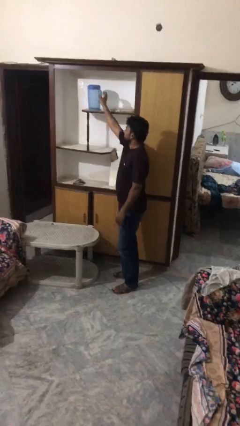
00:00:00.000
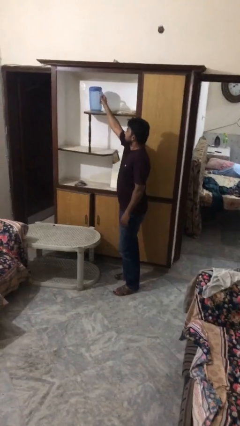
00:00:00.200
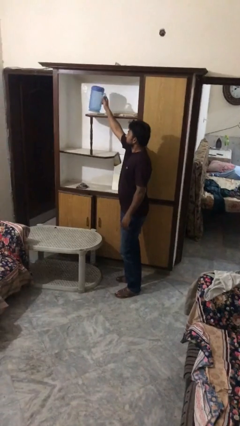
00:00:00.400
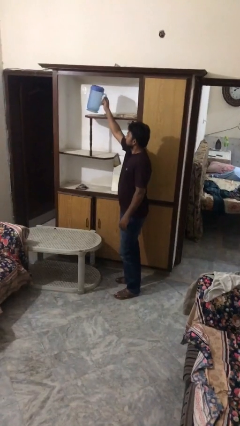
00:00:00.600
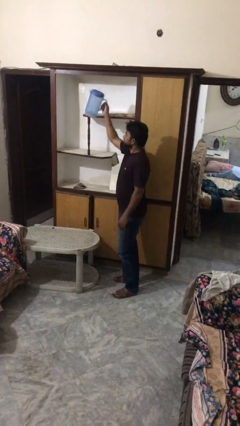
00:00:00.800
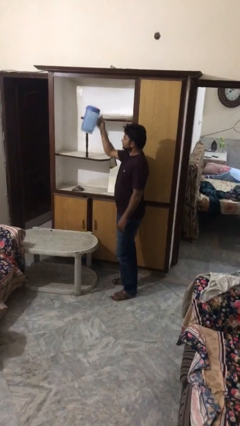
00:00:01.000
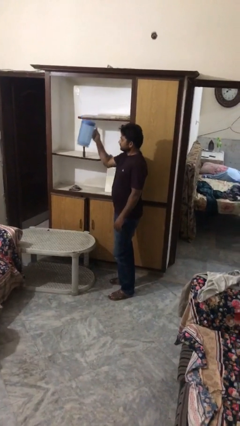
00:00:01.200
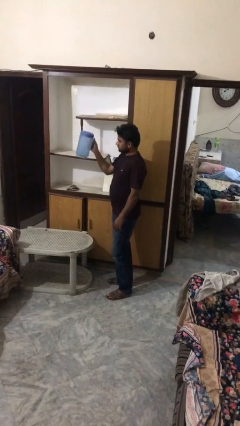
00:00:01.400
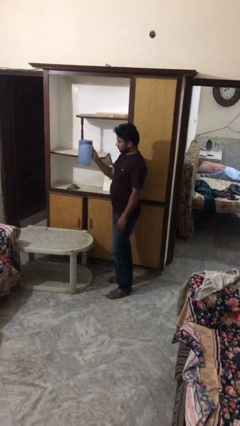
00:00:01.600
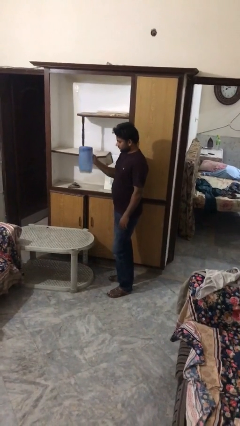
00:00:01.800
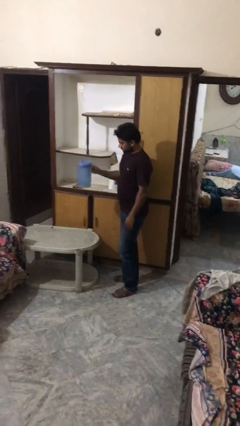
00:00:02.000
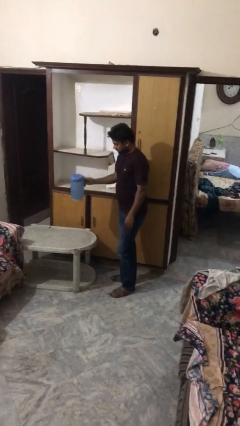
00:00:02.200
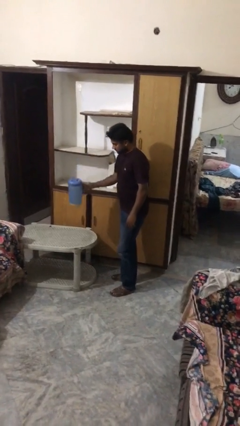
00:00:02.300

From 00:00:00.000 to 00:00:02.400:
person picks up object from shelf

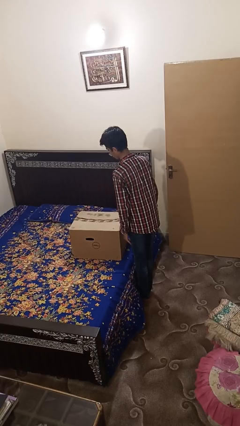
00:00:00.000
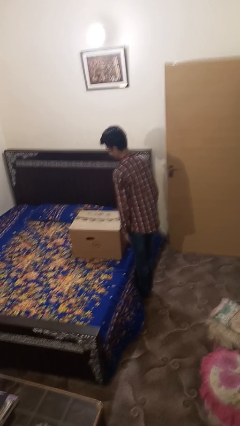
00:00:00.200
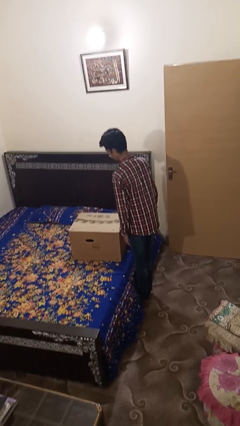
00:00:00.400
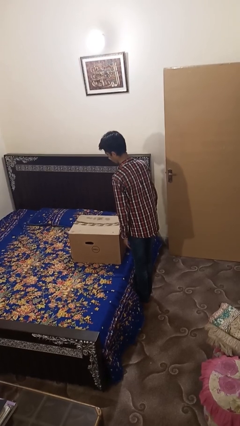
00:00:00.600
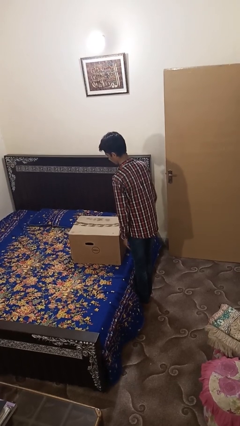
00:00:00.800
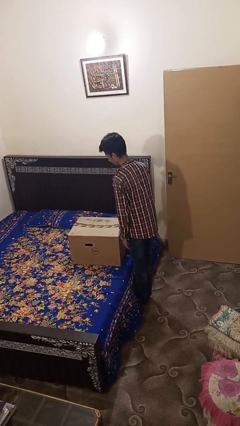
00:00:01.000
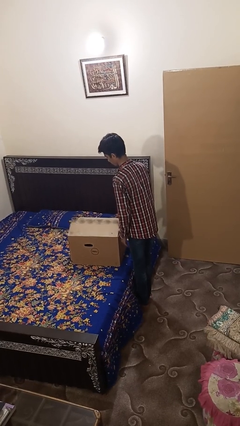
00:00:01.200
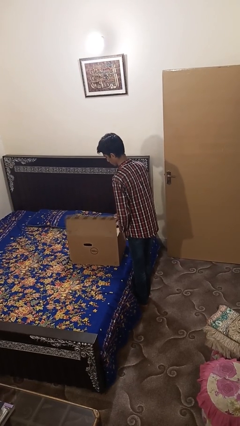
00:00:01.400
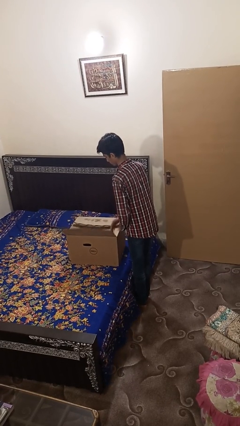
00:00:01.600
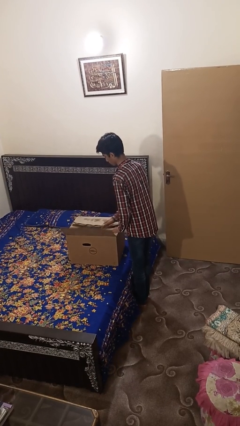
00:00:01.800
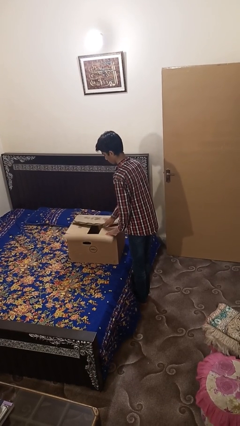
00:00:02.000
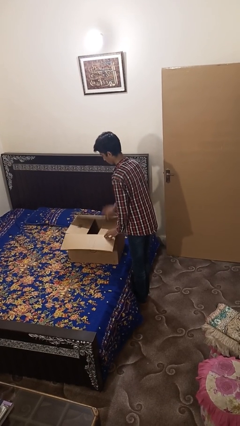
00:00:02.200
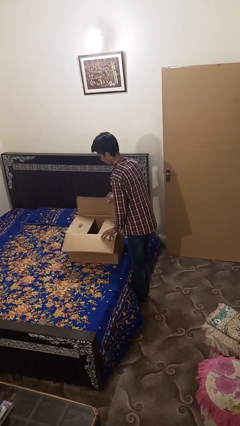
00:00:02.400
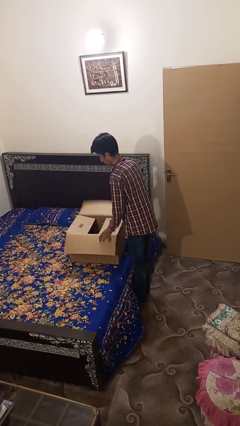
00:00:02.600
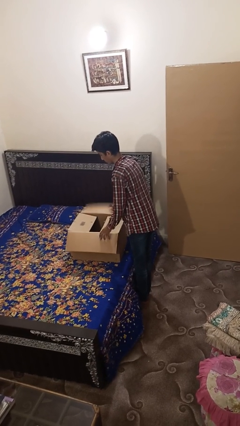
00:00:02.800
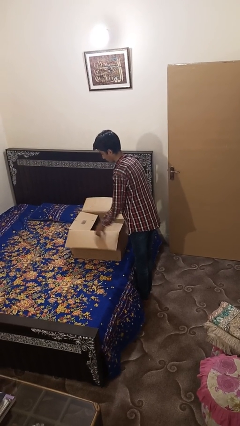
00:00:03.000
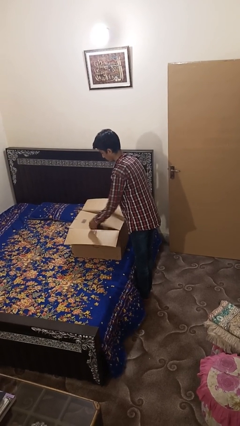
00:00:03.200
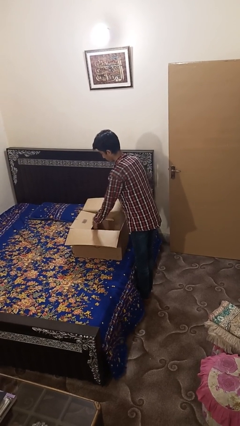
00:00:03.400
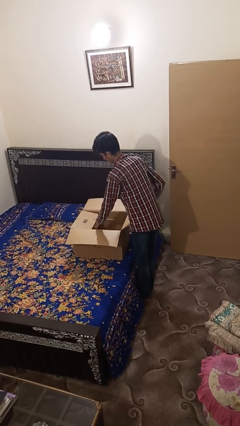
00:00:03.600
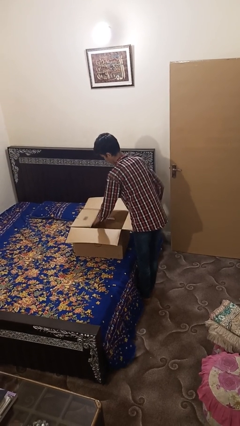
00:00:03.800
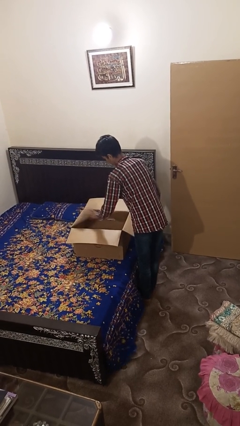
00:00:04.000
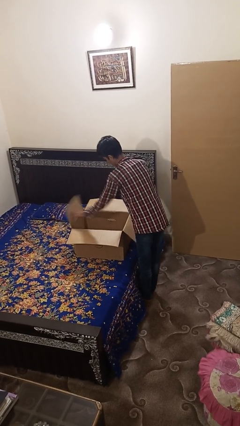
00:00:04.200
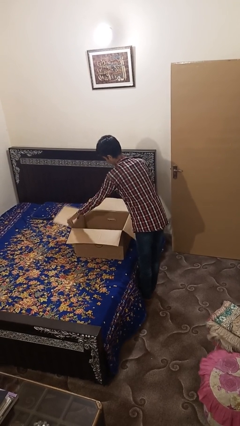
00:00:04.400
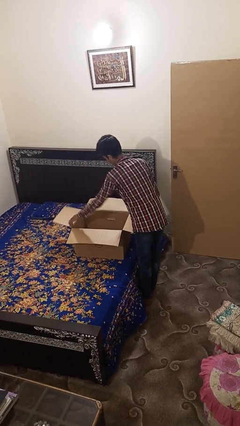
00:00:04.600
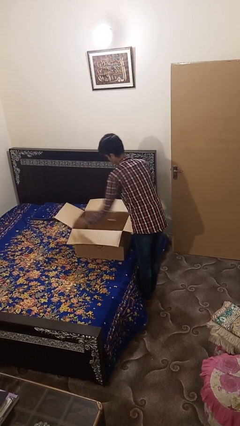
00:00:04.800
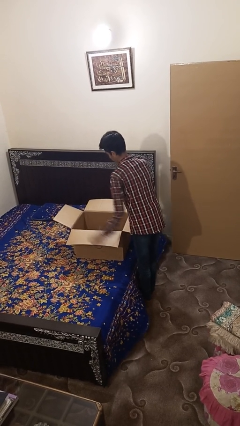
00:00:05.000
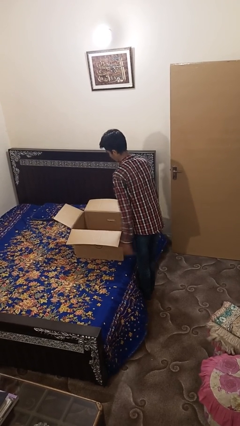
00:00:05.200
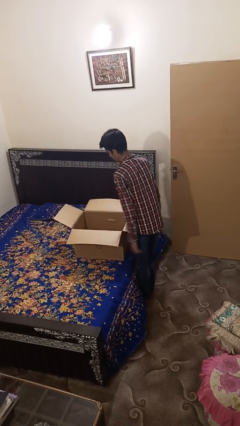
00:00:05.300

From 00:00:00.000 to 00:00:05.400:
person opens box

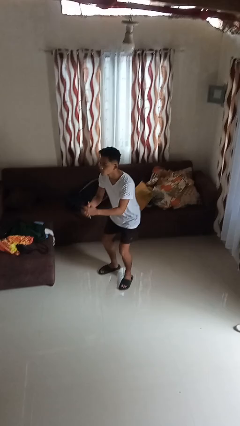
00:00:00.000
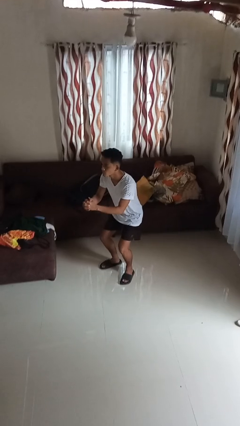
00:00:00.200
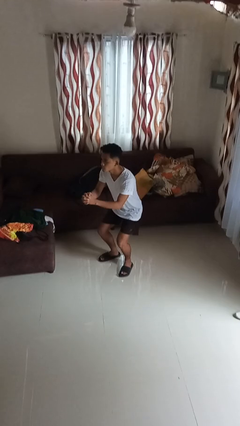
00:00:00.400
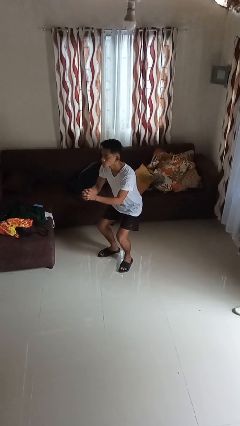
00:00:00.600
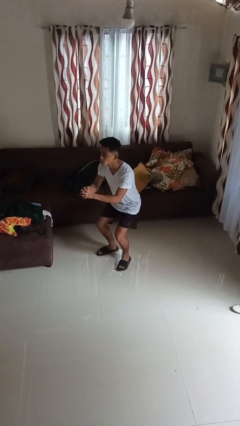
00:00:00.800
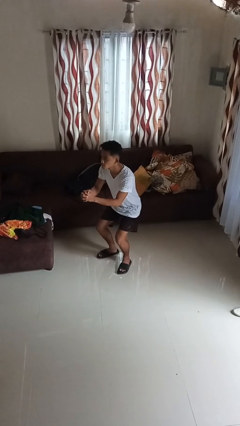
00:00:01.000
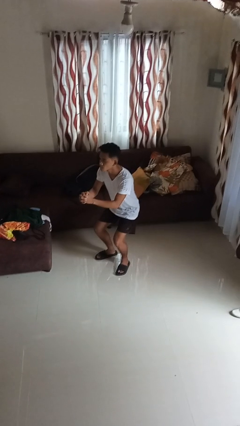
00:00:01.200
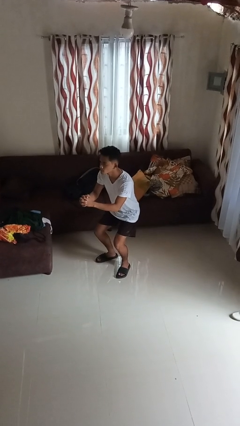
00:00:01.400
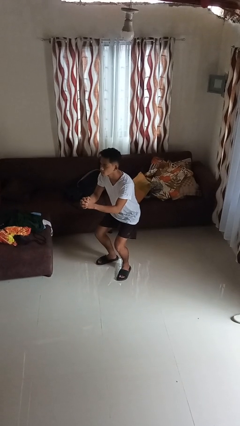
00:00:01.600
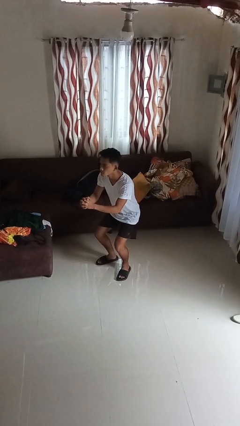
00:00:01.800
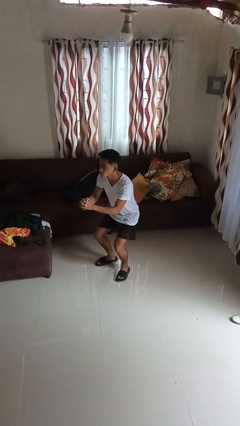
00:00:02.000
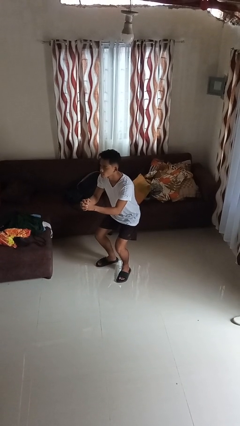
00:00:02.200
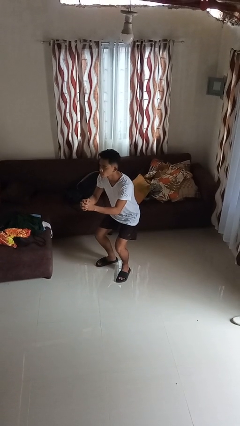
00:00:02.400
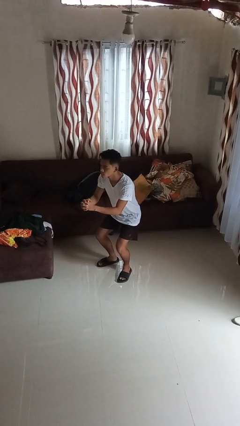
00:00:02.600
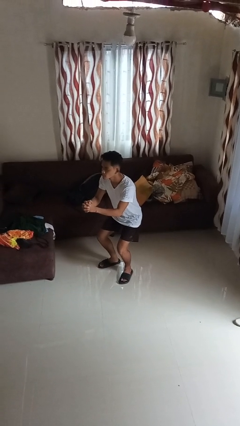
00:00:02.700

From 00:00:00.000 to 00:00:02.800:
person squats

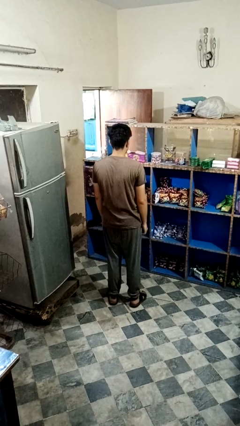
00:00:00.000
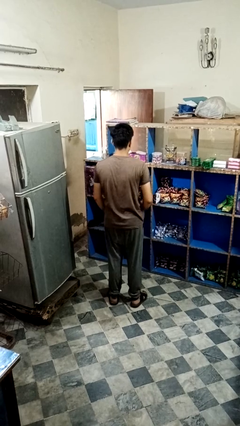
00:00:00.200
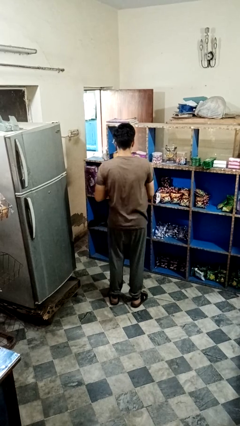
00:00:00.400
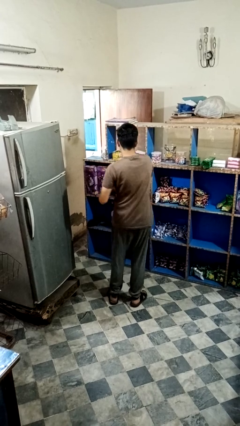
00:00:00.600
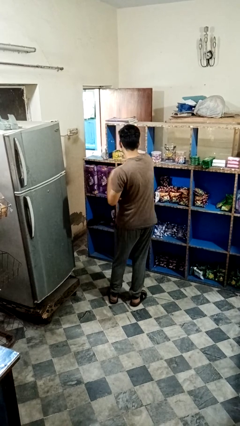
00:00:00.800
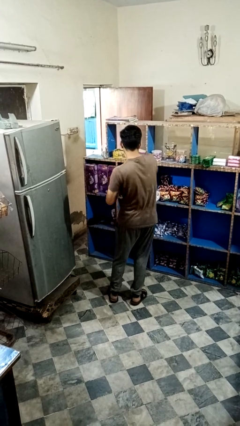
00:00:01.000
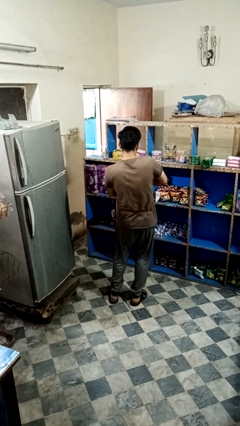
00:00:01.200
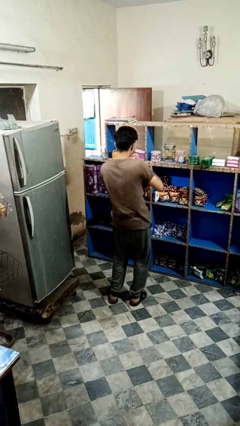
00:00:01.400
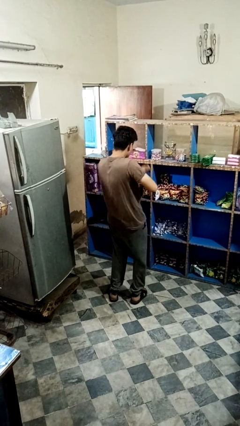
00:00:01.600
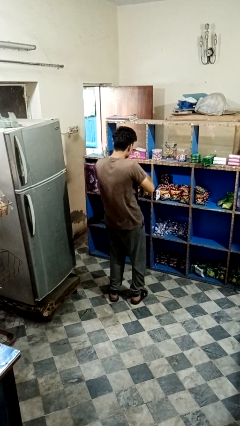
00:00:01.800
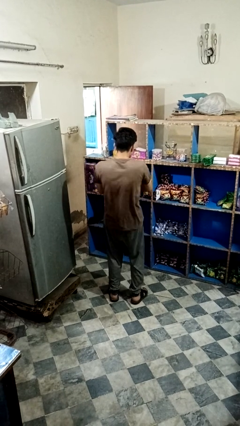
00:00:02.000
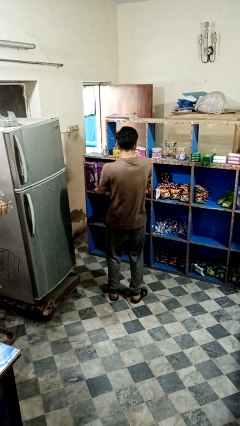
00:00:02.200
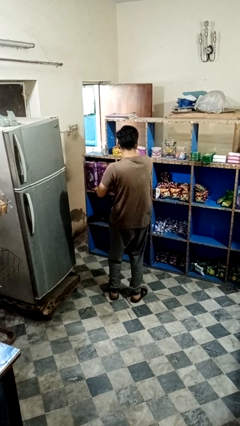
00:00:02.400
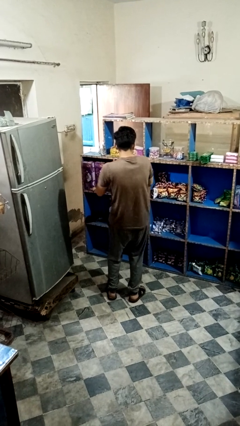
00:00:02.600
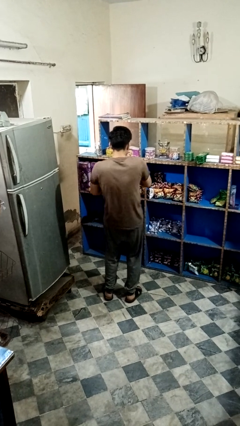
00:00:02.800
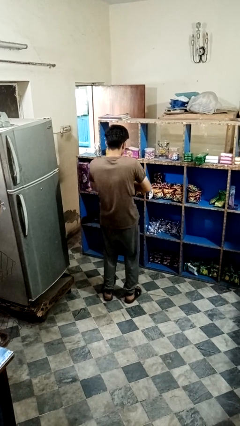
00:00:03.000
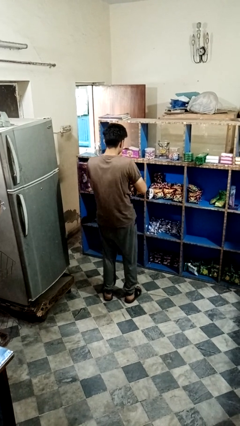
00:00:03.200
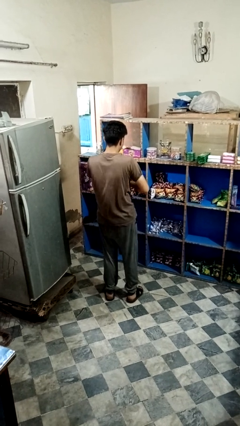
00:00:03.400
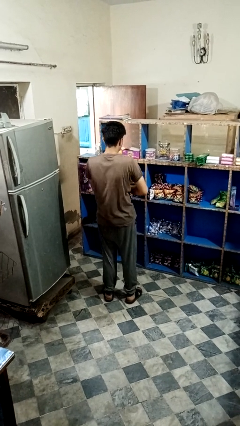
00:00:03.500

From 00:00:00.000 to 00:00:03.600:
person dances in place

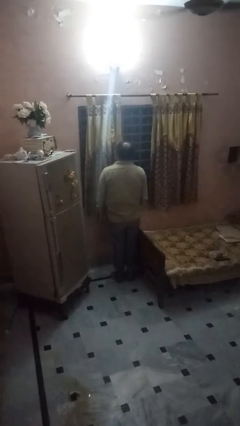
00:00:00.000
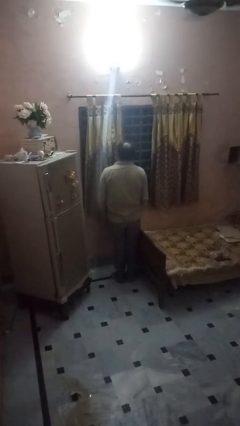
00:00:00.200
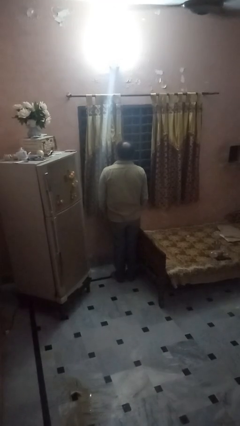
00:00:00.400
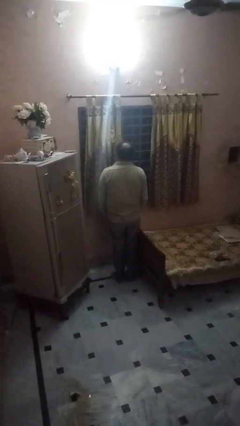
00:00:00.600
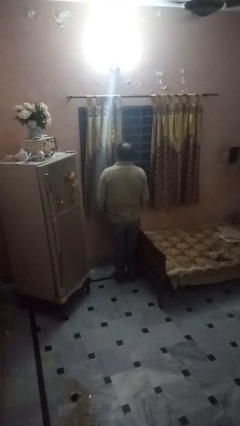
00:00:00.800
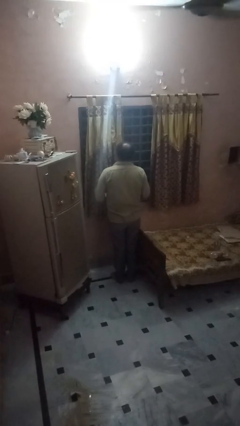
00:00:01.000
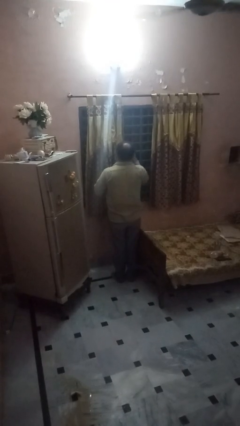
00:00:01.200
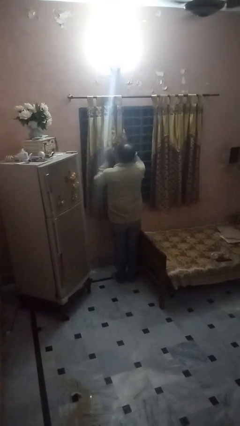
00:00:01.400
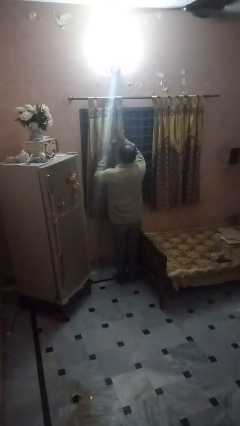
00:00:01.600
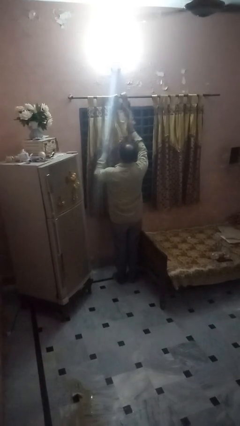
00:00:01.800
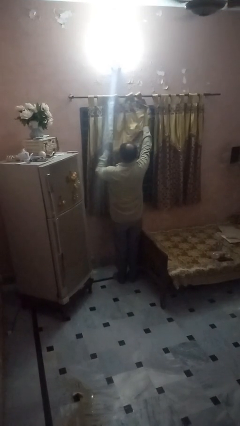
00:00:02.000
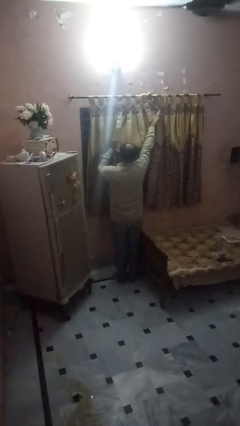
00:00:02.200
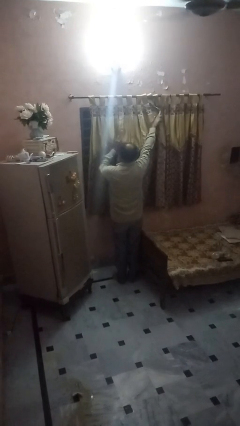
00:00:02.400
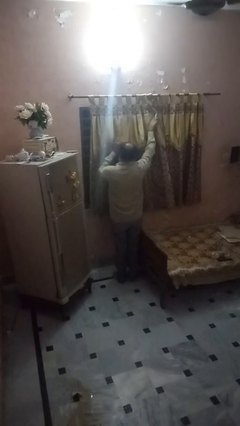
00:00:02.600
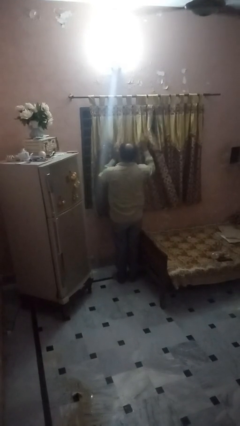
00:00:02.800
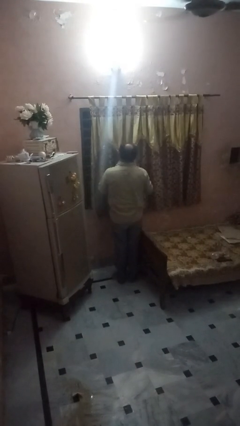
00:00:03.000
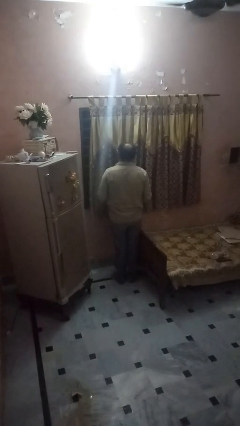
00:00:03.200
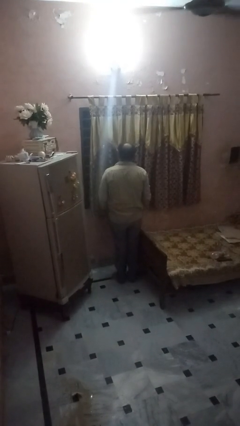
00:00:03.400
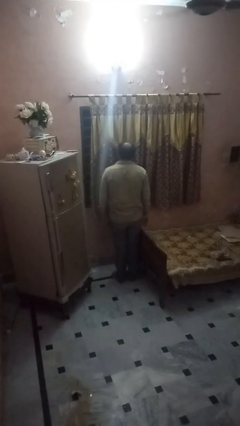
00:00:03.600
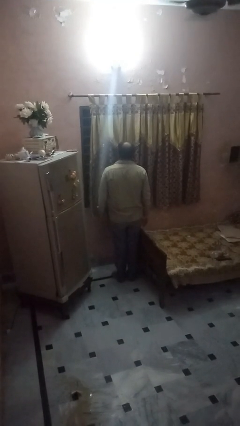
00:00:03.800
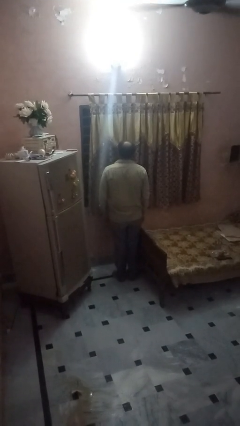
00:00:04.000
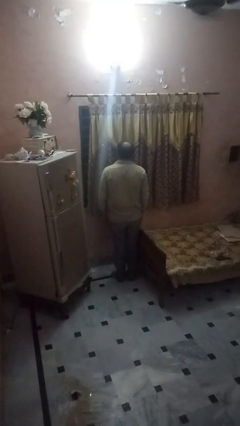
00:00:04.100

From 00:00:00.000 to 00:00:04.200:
person closes curtains
